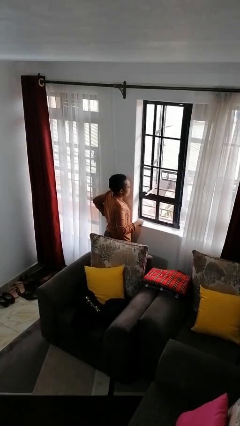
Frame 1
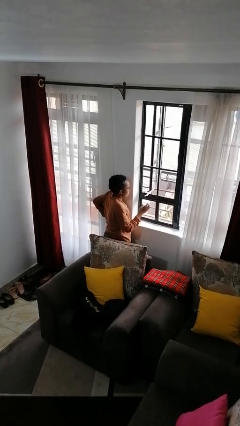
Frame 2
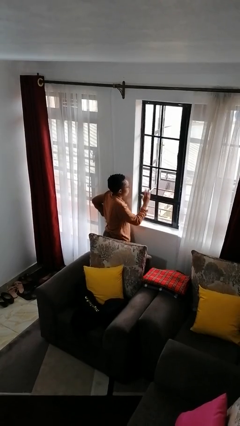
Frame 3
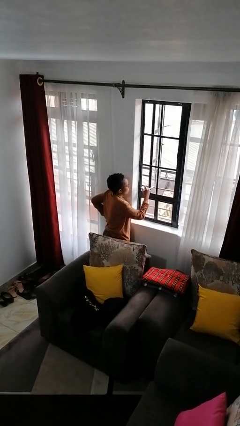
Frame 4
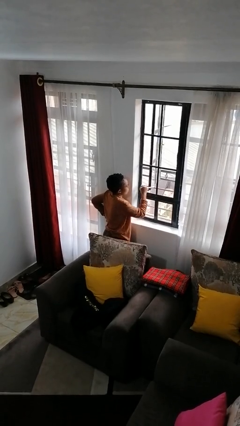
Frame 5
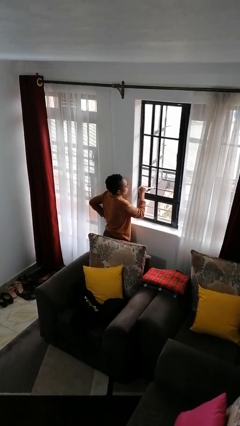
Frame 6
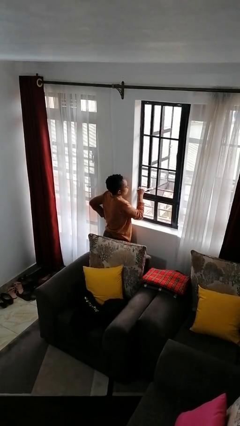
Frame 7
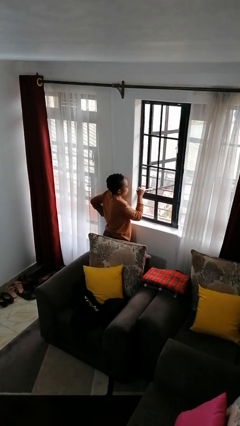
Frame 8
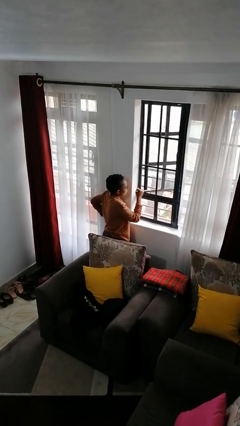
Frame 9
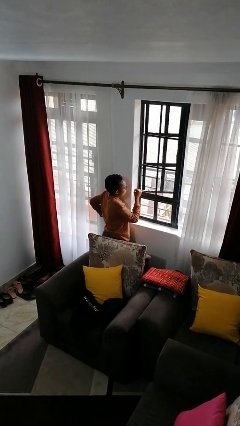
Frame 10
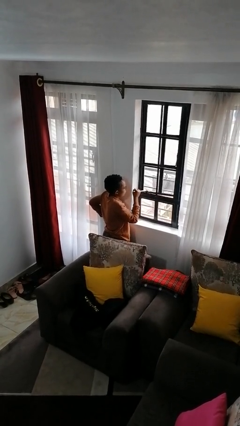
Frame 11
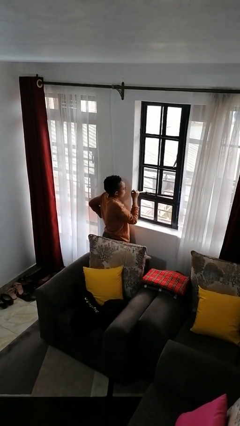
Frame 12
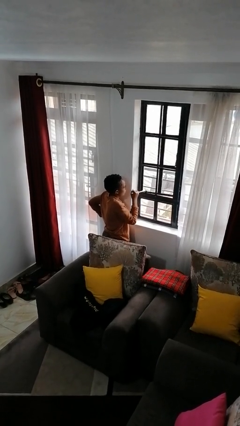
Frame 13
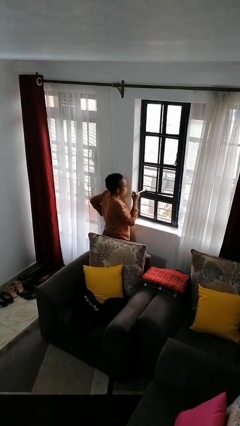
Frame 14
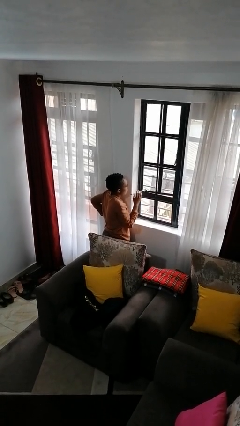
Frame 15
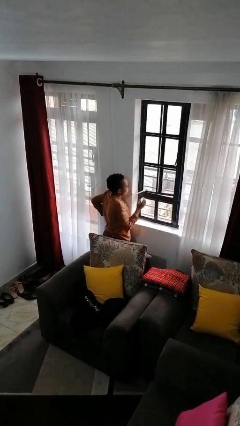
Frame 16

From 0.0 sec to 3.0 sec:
person closes home window

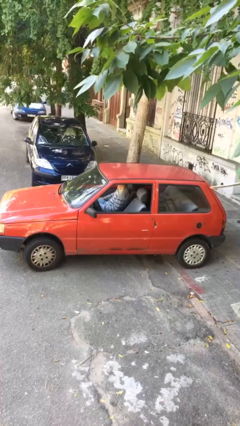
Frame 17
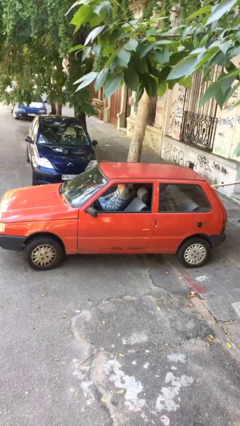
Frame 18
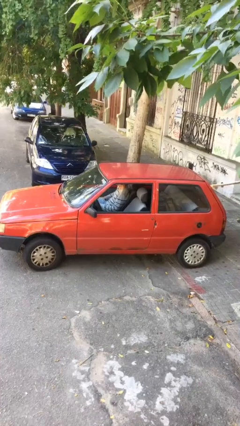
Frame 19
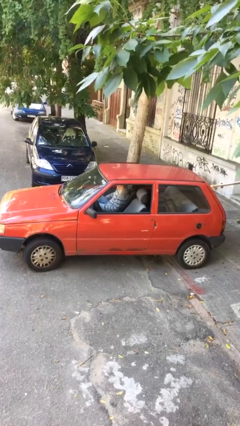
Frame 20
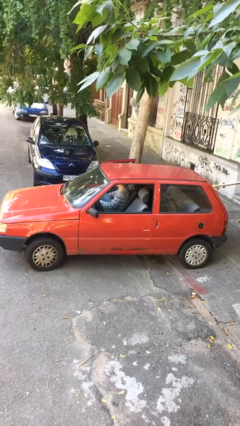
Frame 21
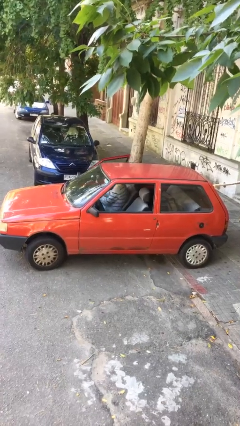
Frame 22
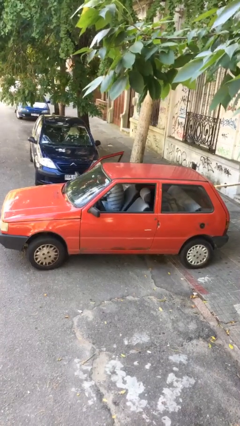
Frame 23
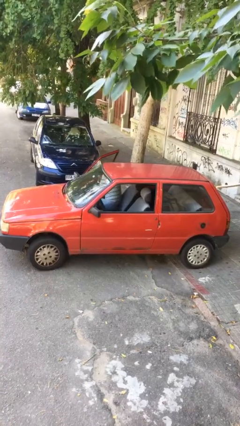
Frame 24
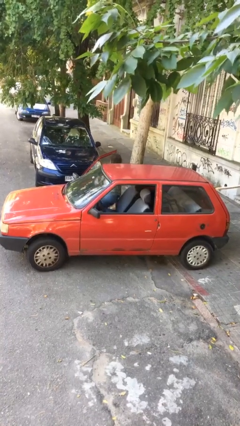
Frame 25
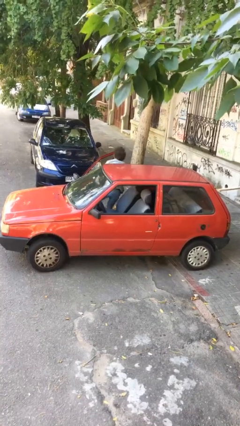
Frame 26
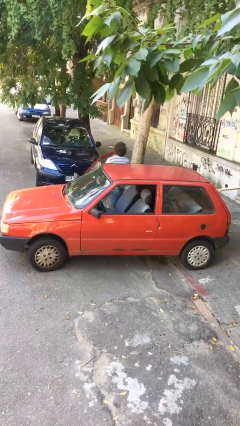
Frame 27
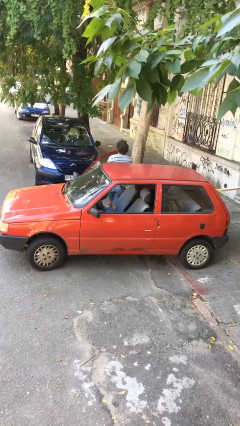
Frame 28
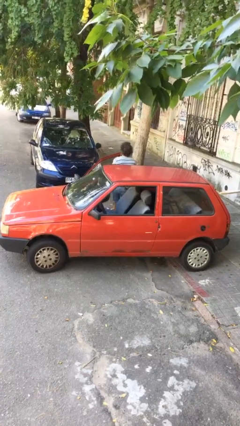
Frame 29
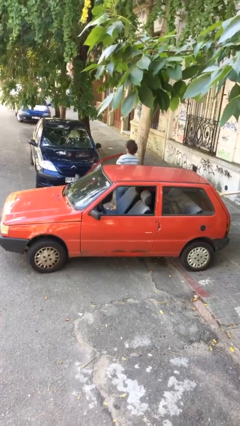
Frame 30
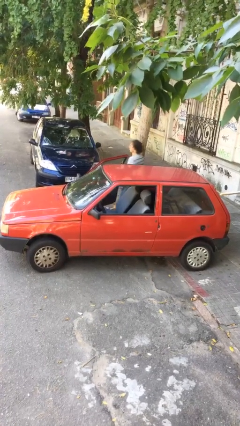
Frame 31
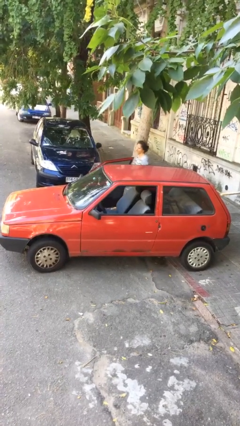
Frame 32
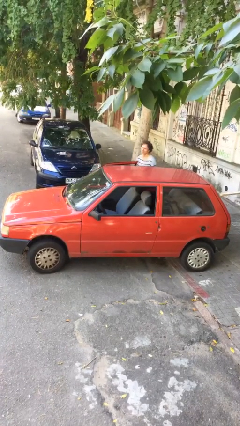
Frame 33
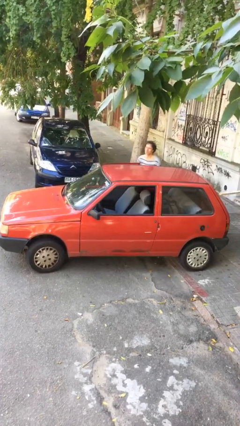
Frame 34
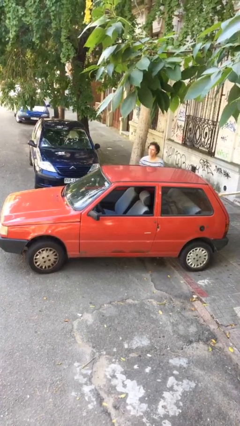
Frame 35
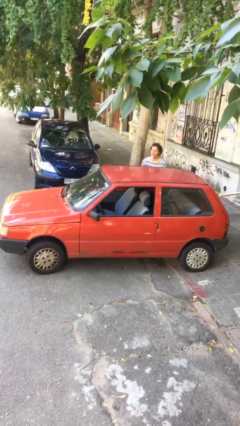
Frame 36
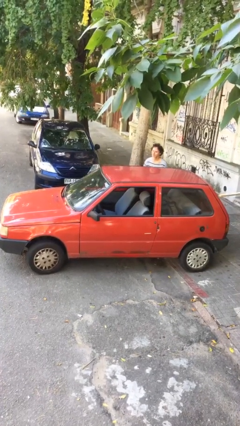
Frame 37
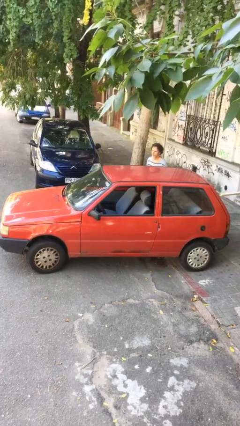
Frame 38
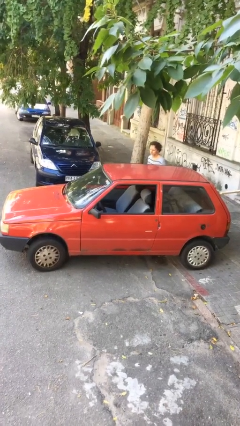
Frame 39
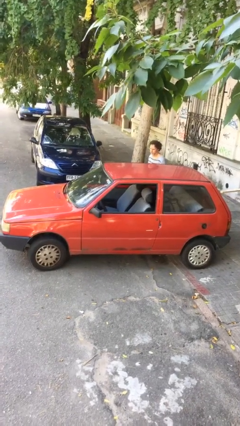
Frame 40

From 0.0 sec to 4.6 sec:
car drops off person

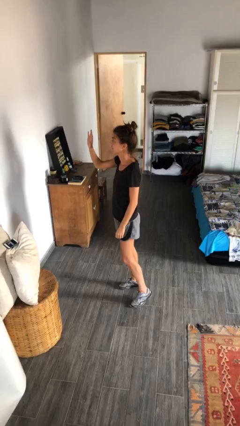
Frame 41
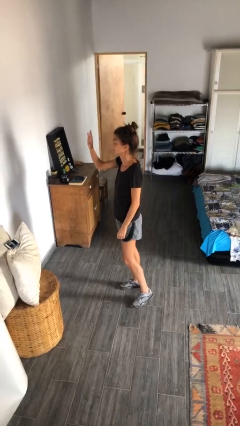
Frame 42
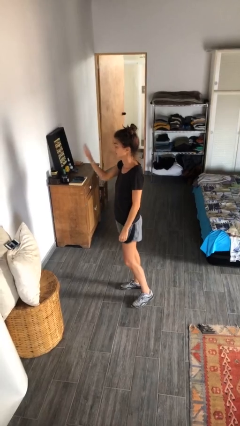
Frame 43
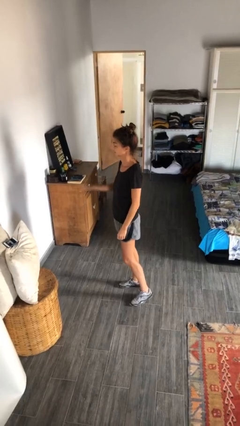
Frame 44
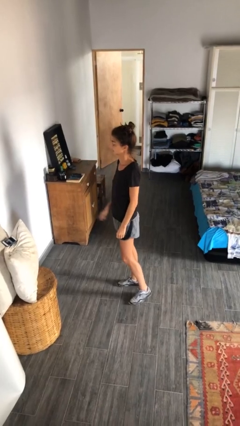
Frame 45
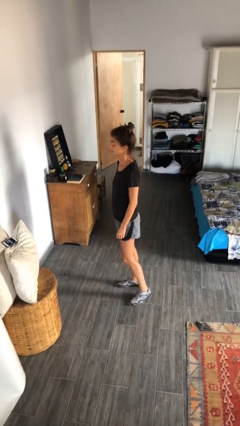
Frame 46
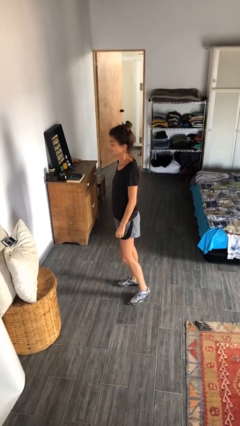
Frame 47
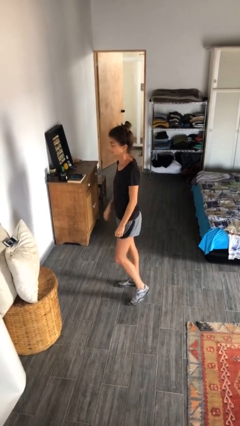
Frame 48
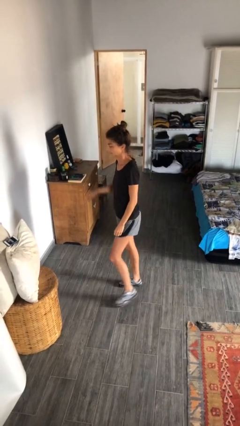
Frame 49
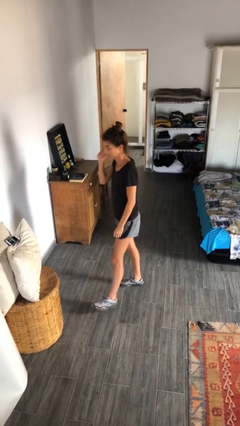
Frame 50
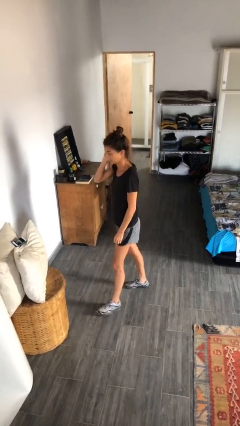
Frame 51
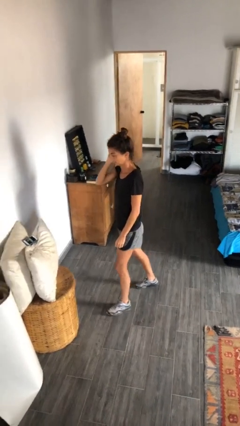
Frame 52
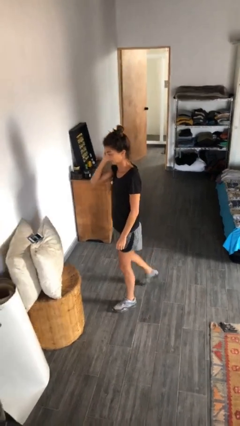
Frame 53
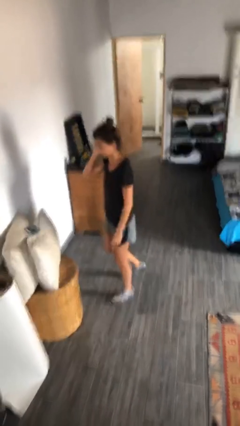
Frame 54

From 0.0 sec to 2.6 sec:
person gestures lower hand

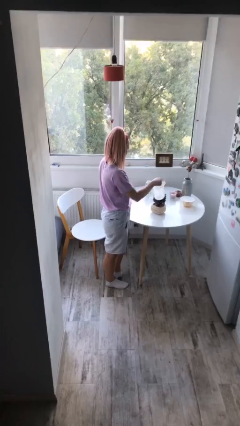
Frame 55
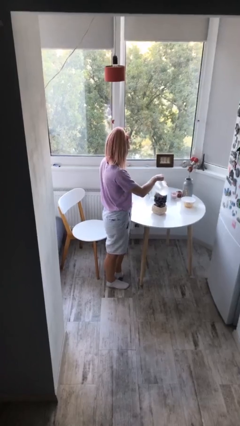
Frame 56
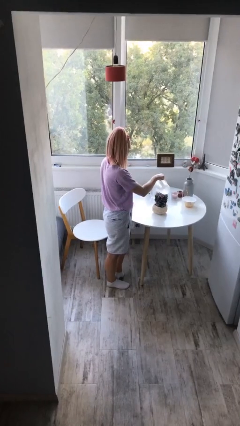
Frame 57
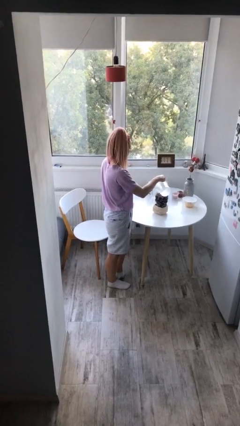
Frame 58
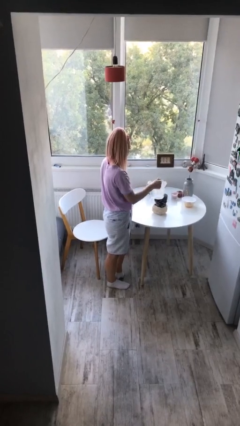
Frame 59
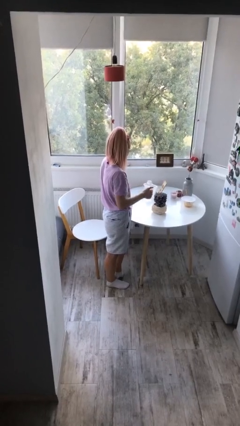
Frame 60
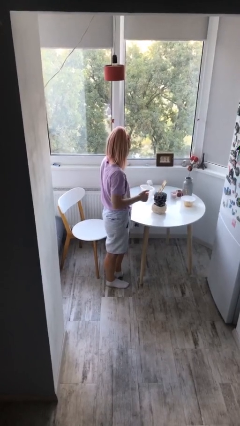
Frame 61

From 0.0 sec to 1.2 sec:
person waters houseplant

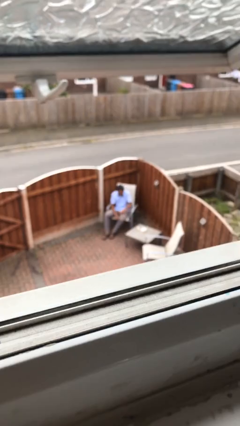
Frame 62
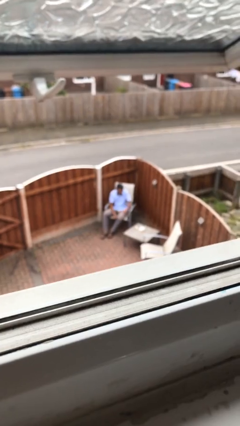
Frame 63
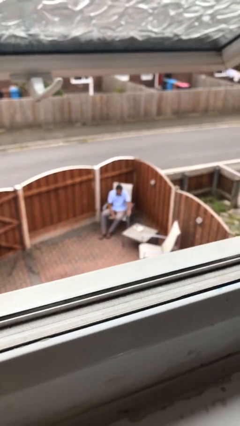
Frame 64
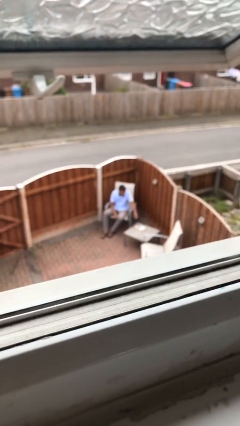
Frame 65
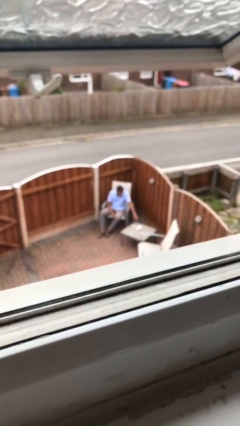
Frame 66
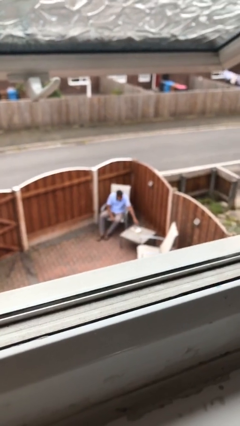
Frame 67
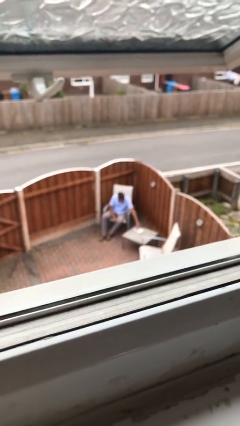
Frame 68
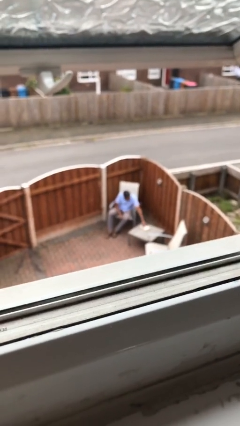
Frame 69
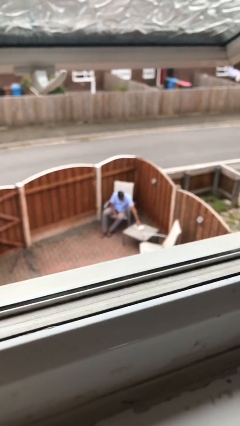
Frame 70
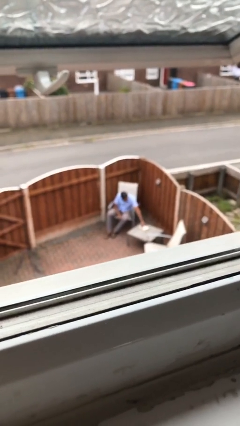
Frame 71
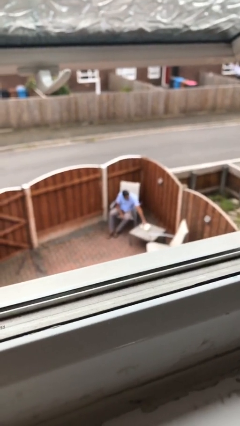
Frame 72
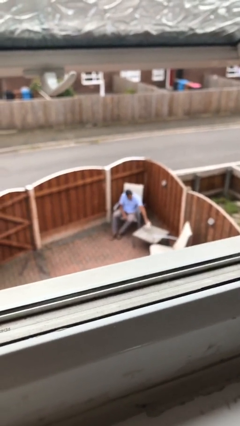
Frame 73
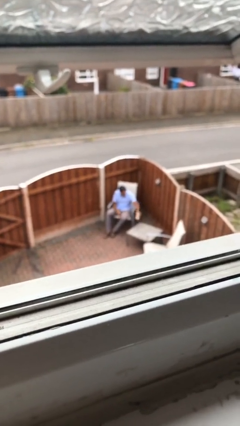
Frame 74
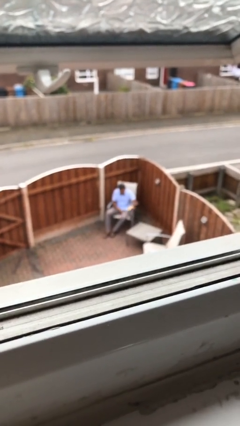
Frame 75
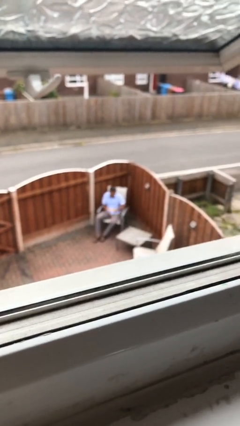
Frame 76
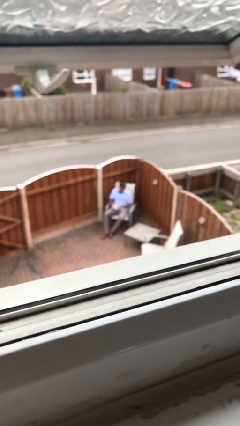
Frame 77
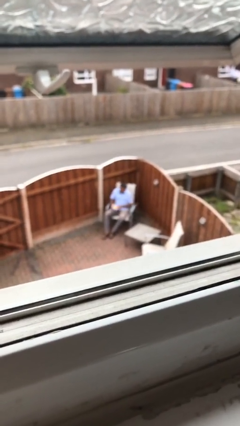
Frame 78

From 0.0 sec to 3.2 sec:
person picks up object from table

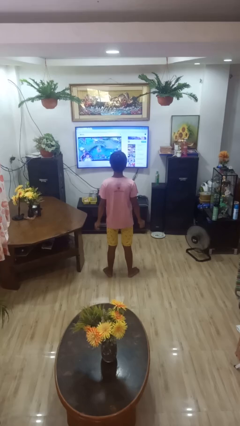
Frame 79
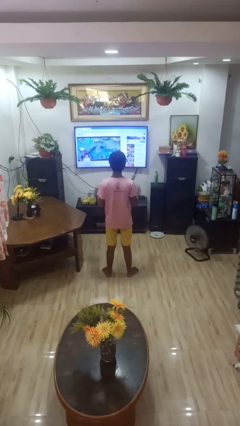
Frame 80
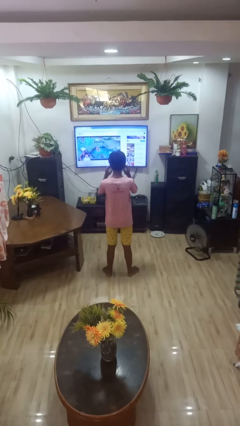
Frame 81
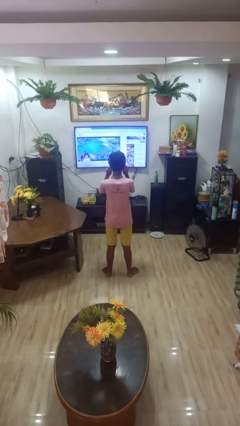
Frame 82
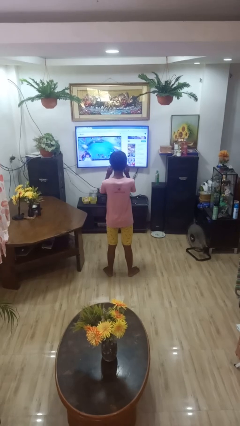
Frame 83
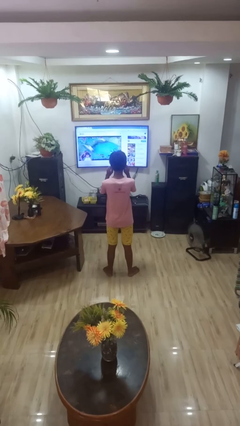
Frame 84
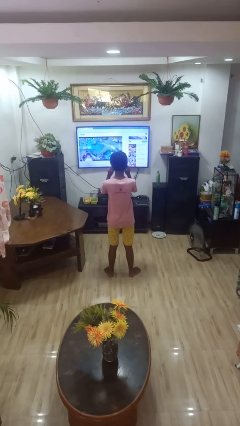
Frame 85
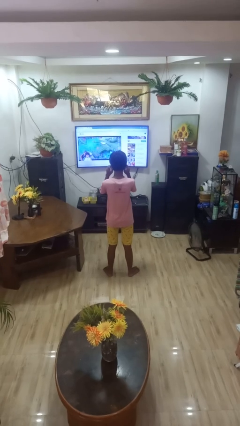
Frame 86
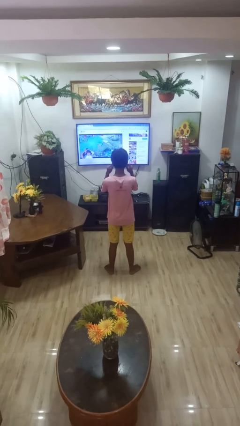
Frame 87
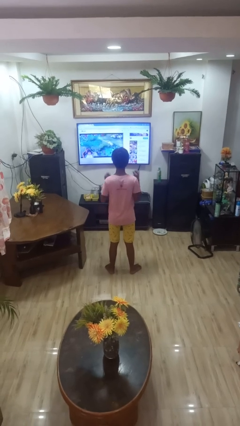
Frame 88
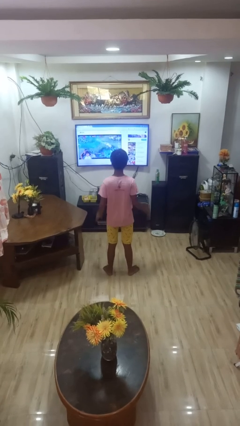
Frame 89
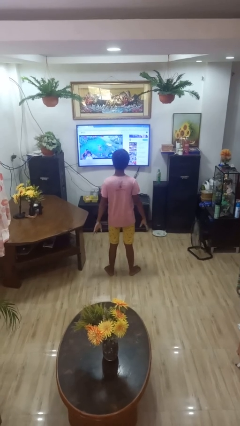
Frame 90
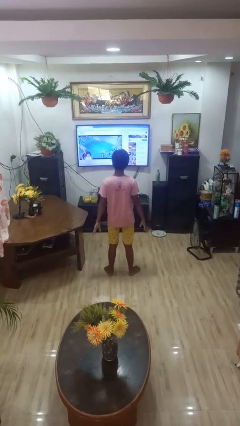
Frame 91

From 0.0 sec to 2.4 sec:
person touches earlobe

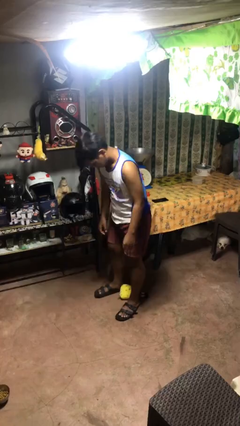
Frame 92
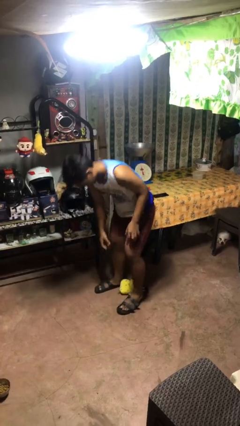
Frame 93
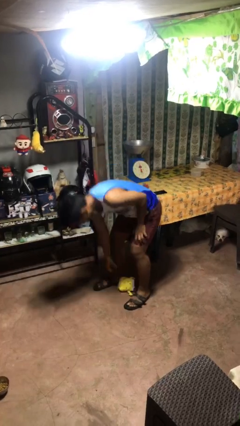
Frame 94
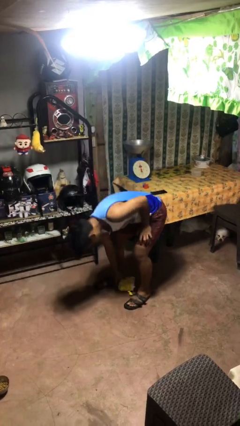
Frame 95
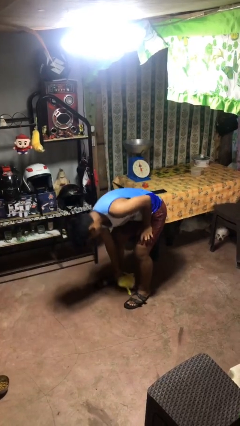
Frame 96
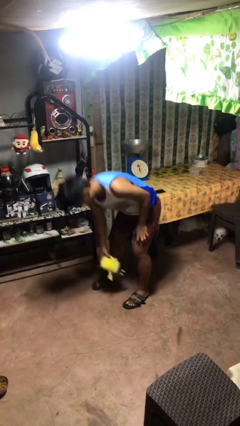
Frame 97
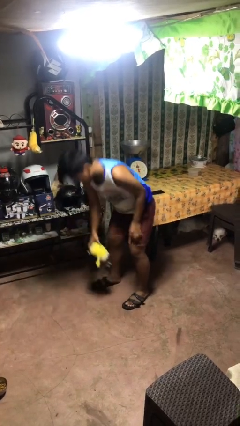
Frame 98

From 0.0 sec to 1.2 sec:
person picks up object from floor
